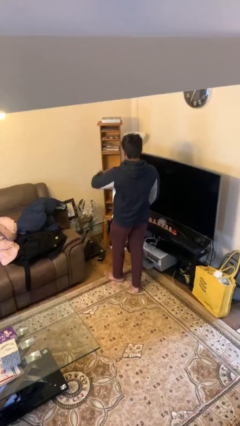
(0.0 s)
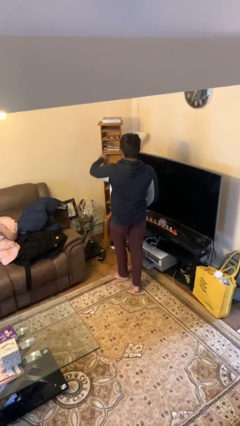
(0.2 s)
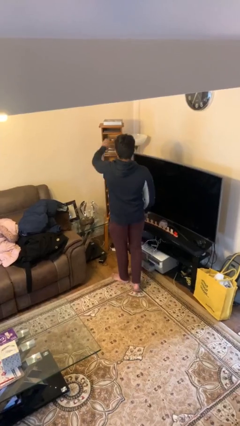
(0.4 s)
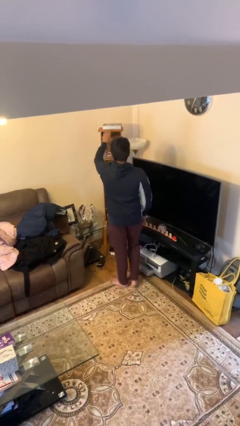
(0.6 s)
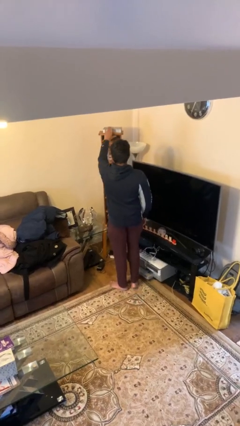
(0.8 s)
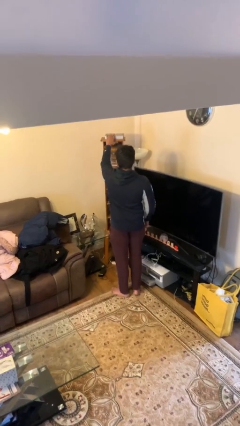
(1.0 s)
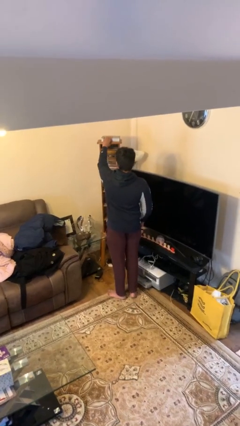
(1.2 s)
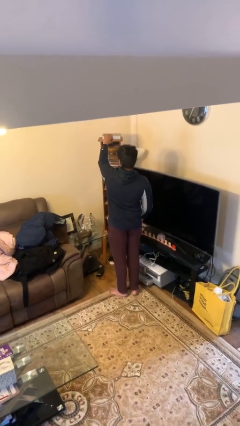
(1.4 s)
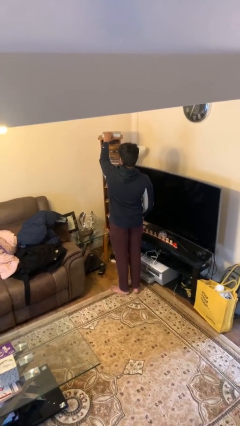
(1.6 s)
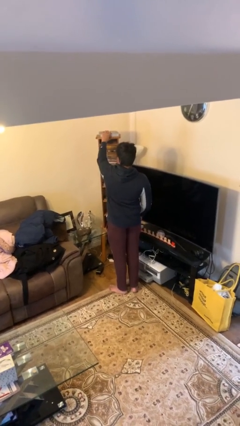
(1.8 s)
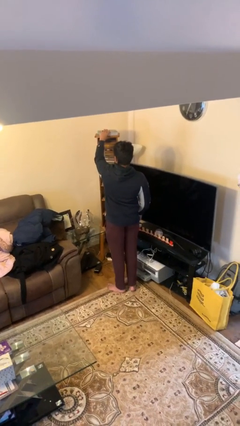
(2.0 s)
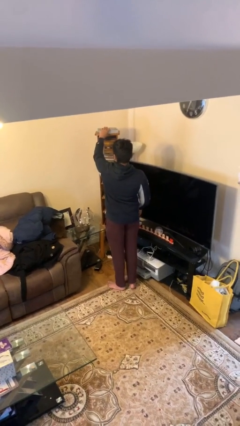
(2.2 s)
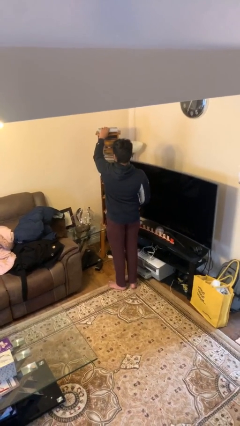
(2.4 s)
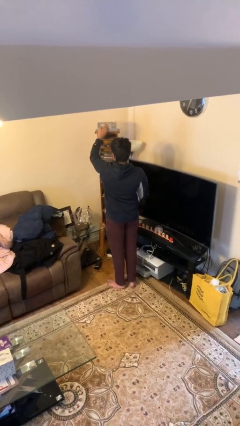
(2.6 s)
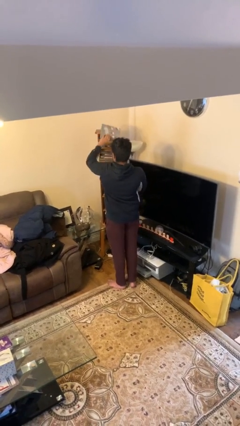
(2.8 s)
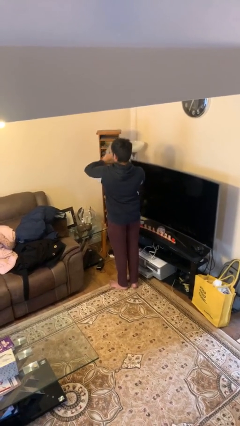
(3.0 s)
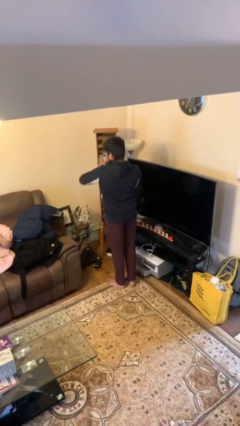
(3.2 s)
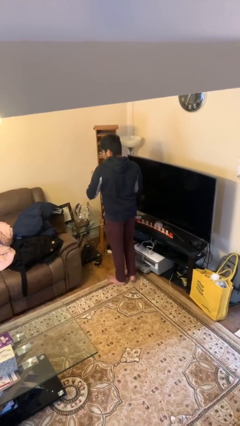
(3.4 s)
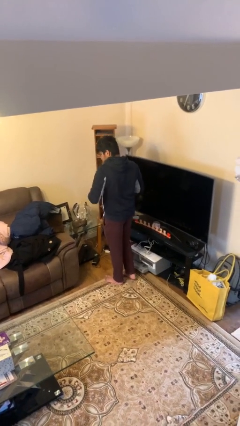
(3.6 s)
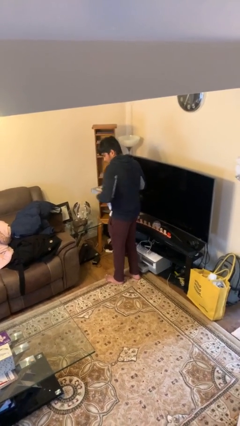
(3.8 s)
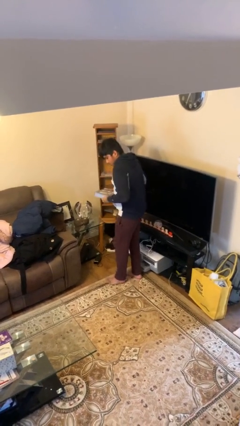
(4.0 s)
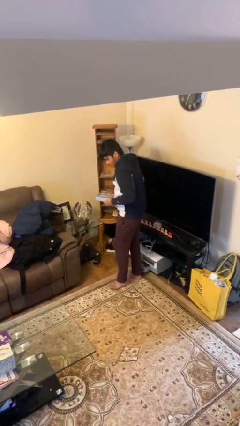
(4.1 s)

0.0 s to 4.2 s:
person picks up object from shelf

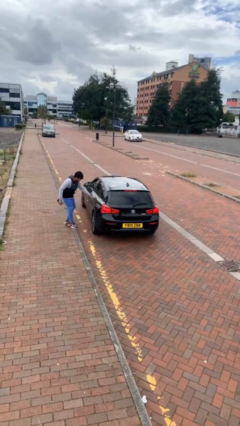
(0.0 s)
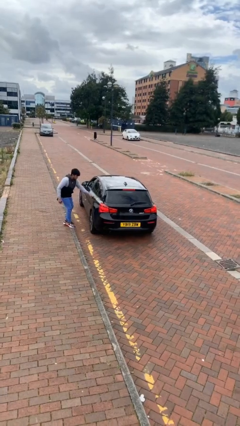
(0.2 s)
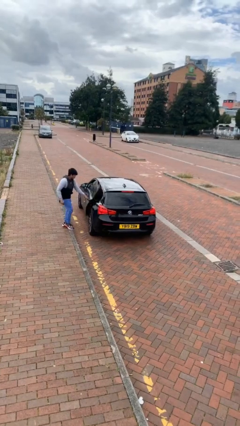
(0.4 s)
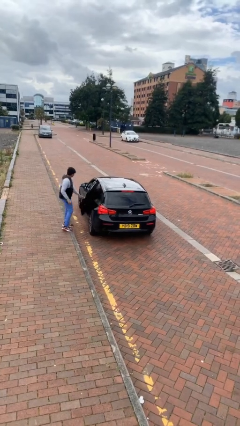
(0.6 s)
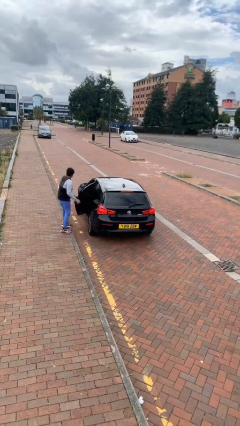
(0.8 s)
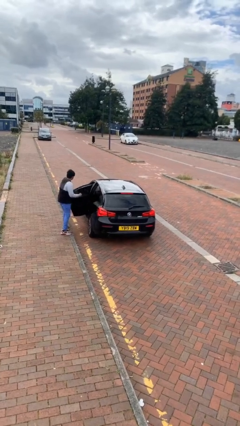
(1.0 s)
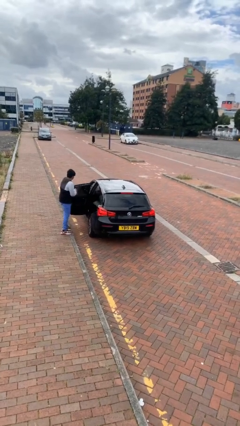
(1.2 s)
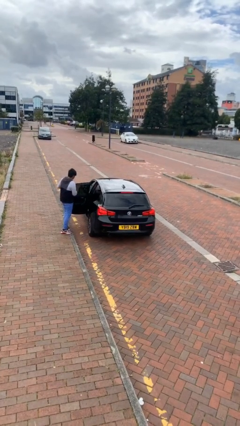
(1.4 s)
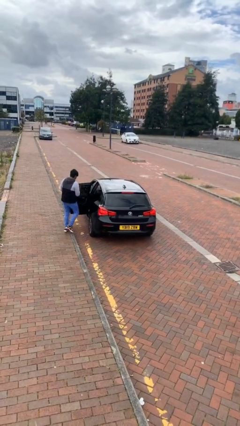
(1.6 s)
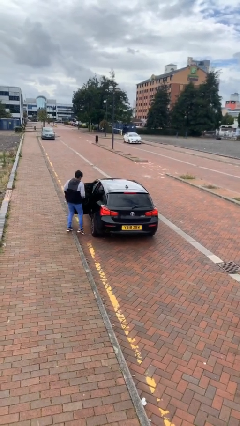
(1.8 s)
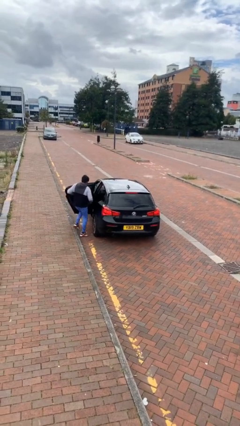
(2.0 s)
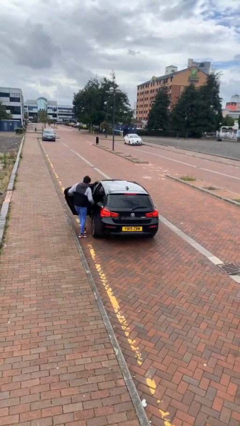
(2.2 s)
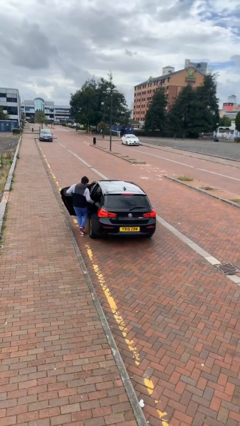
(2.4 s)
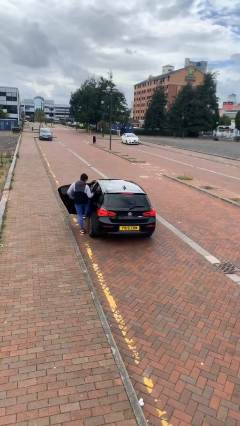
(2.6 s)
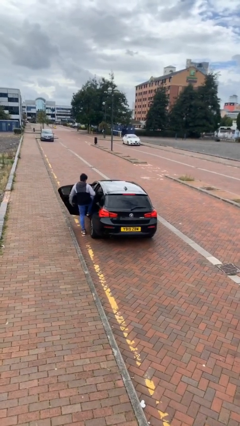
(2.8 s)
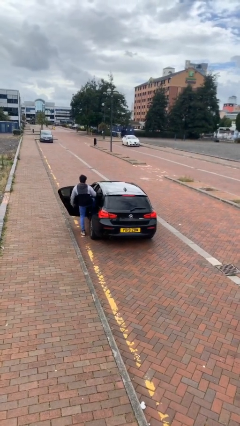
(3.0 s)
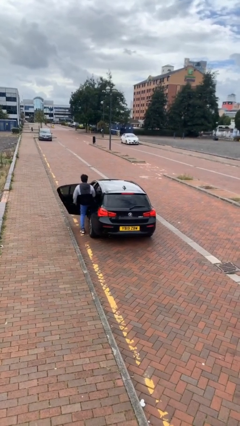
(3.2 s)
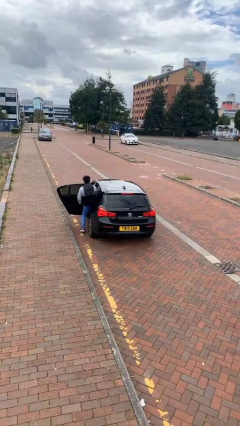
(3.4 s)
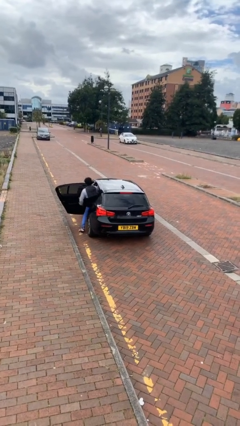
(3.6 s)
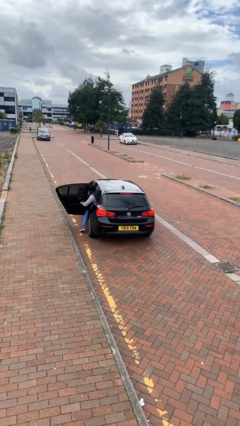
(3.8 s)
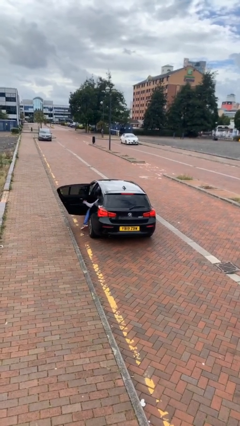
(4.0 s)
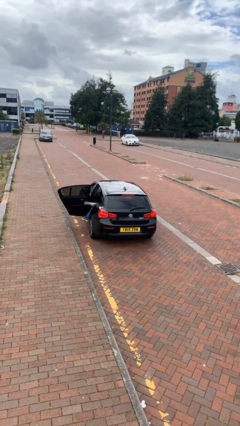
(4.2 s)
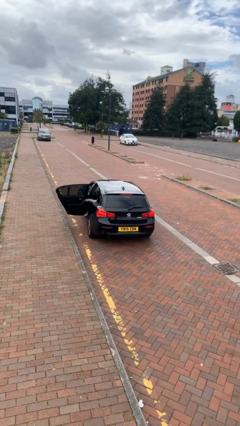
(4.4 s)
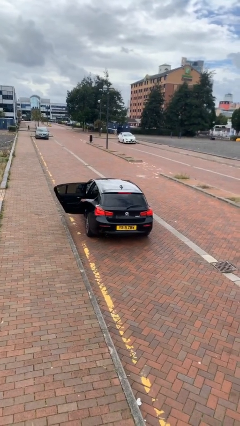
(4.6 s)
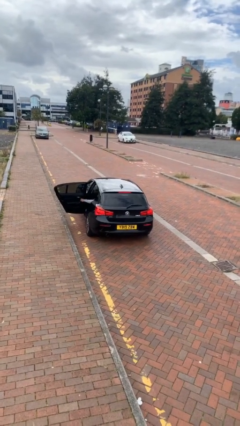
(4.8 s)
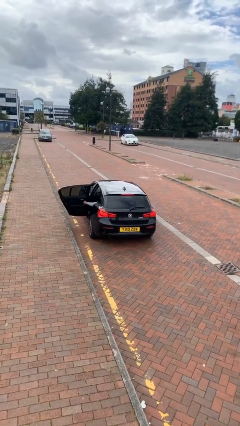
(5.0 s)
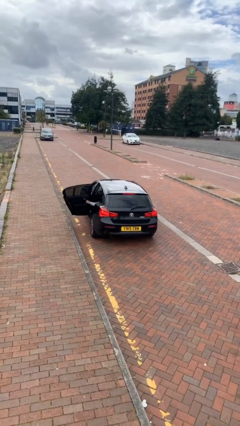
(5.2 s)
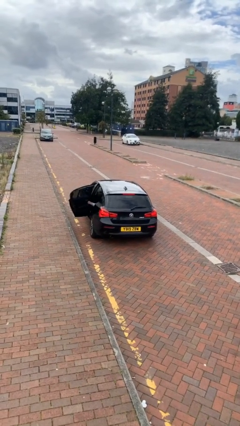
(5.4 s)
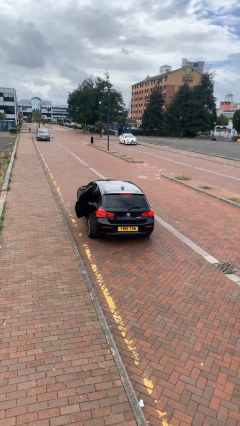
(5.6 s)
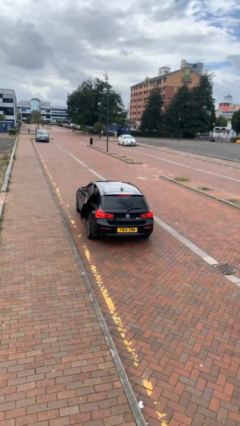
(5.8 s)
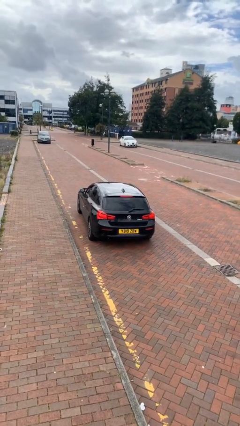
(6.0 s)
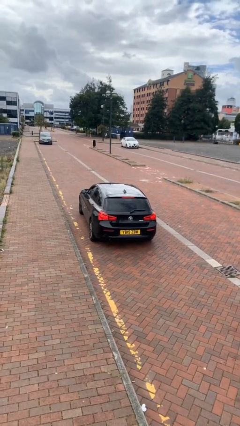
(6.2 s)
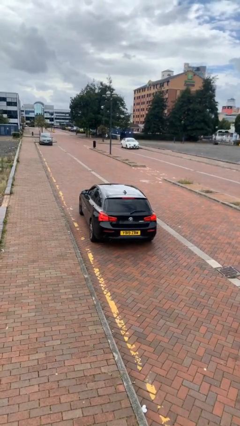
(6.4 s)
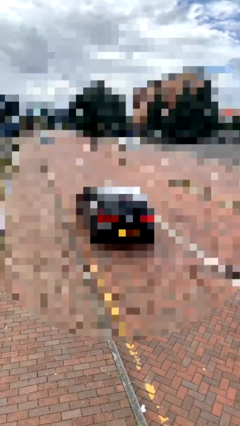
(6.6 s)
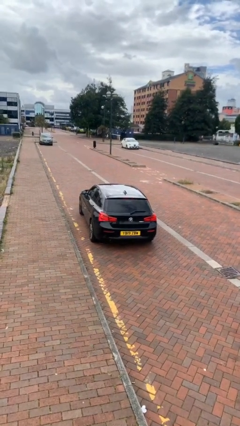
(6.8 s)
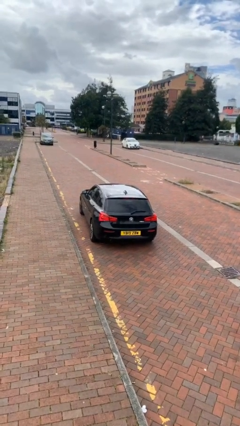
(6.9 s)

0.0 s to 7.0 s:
car picks up person

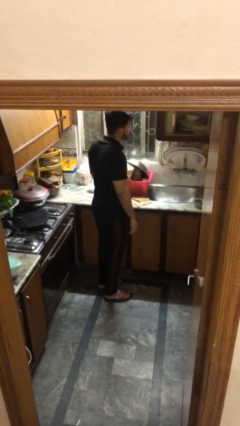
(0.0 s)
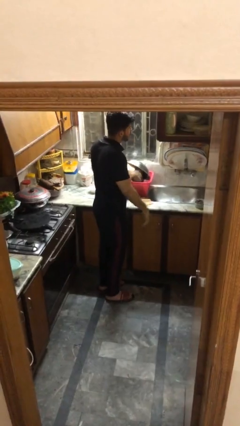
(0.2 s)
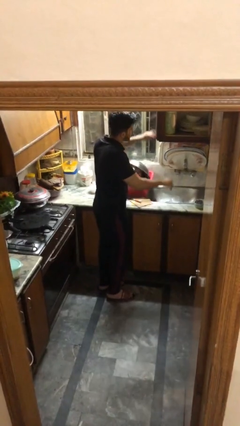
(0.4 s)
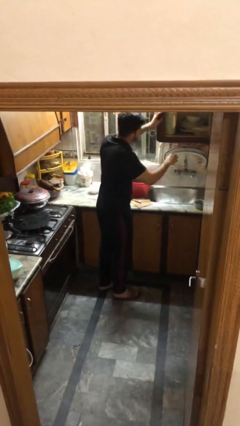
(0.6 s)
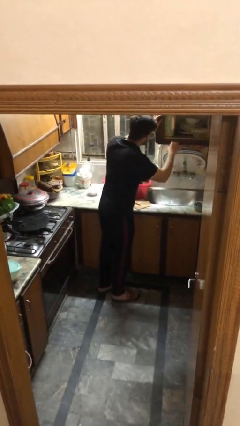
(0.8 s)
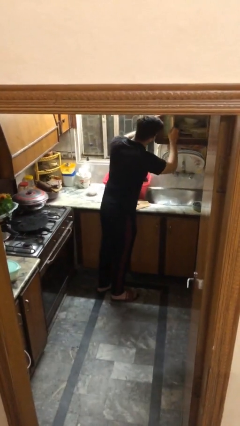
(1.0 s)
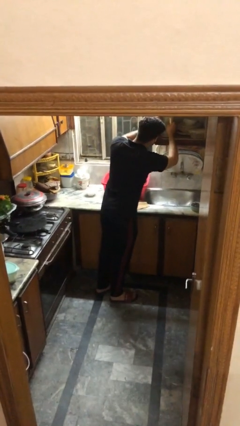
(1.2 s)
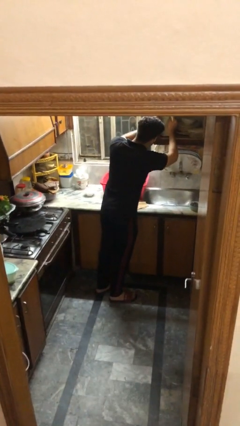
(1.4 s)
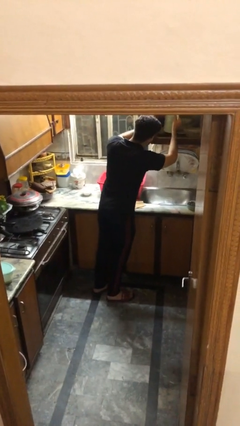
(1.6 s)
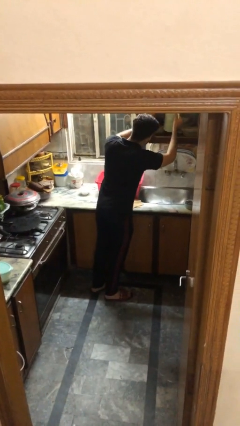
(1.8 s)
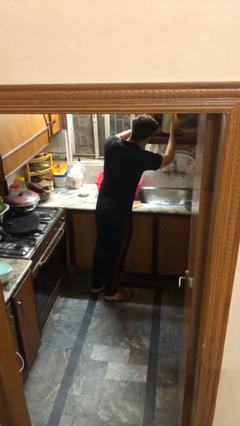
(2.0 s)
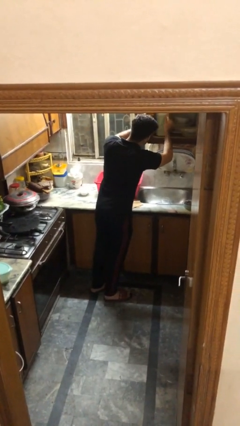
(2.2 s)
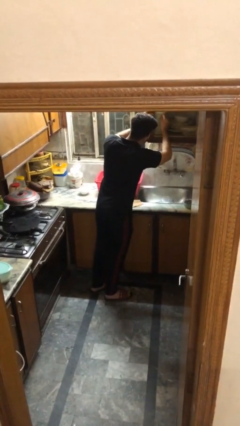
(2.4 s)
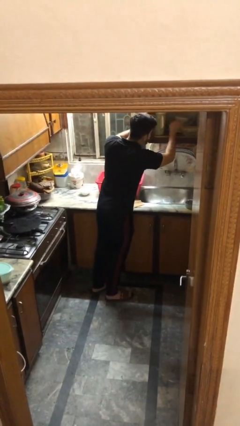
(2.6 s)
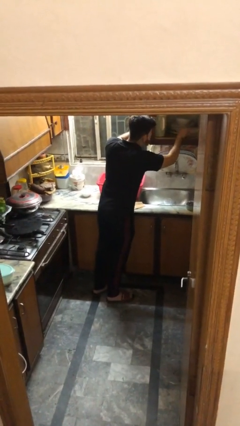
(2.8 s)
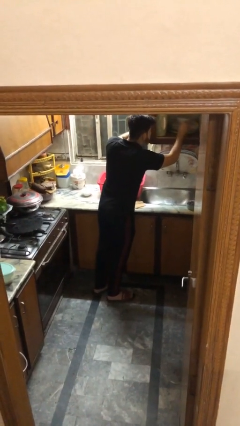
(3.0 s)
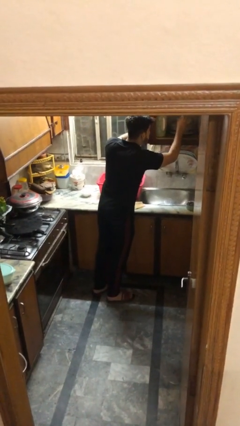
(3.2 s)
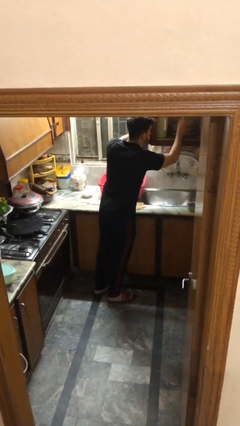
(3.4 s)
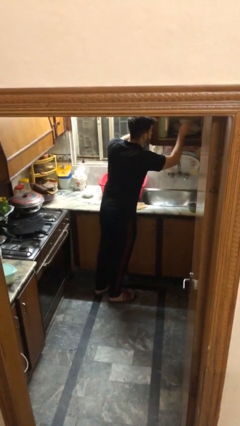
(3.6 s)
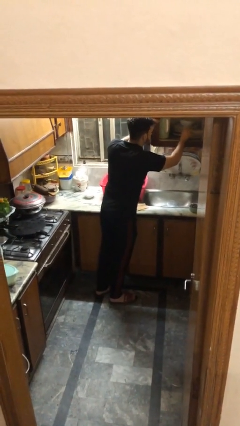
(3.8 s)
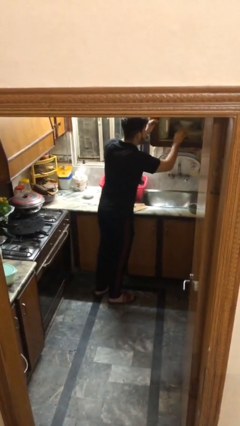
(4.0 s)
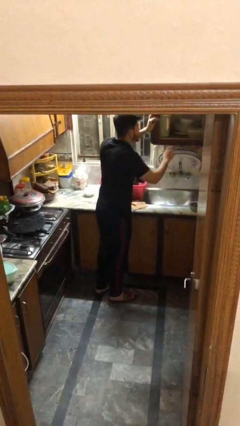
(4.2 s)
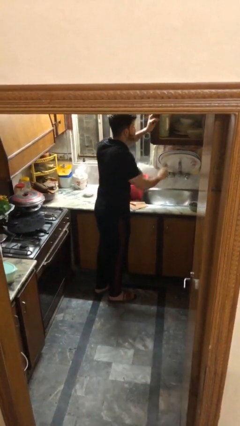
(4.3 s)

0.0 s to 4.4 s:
person searches in kitchen drawer

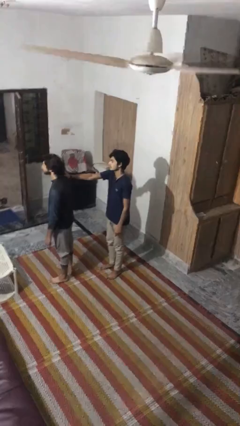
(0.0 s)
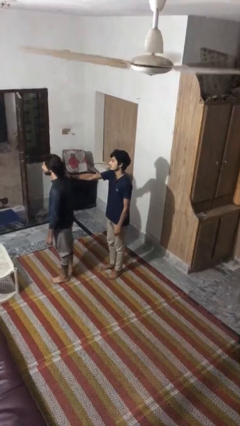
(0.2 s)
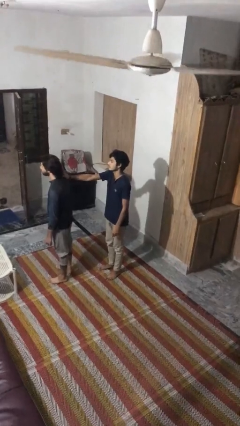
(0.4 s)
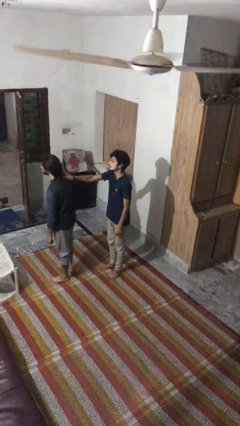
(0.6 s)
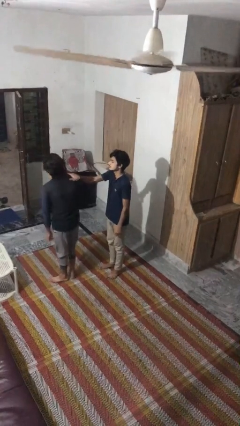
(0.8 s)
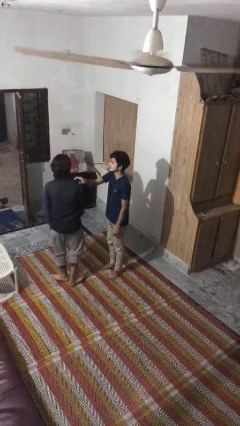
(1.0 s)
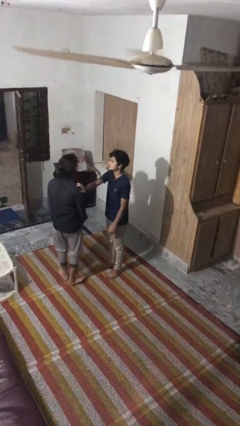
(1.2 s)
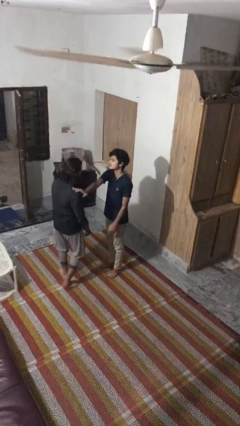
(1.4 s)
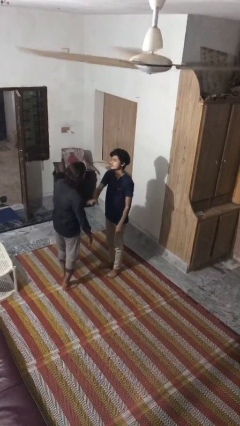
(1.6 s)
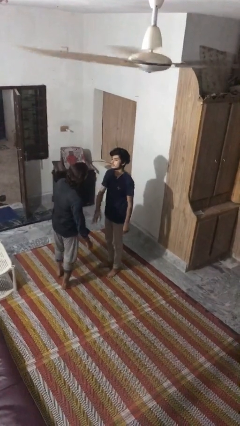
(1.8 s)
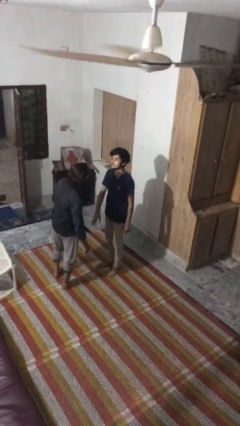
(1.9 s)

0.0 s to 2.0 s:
person spins person around

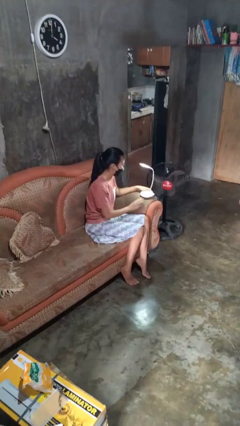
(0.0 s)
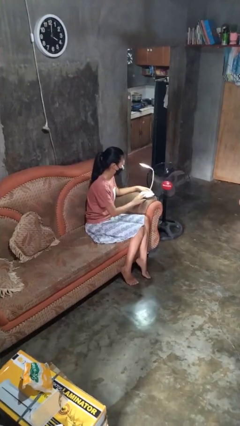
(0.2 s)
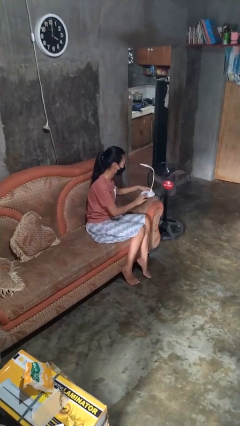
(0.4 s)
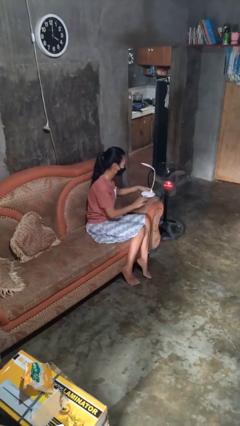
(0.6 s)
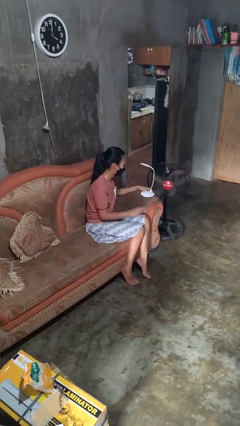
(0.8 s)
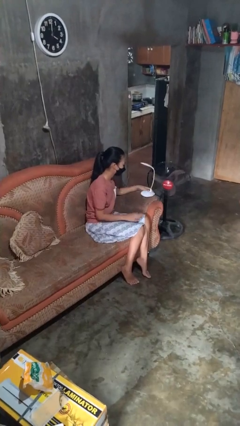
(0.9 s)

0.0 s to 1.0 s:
person turns off lamp
